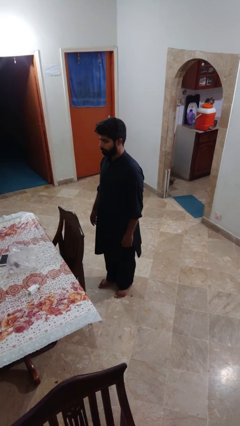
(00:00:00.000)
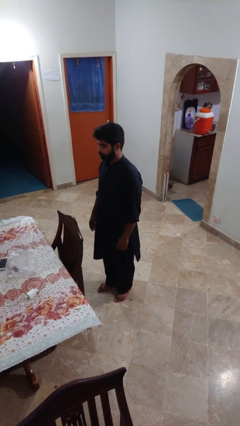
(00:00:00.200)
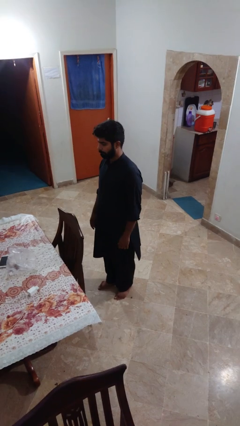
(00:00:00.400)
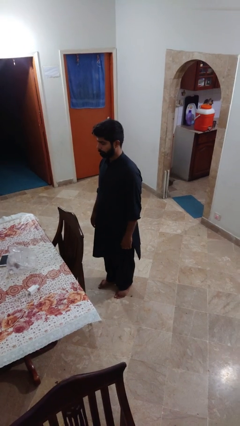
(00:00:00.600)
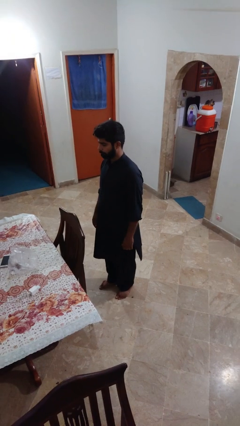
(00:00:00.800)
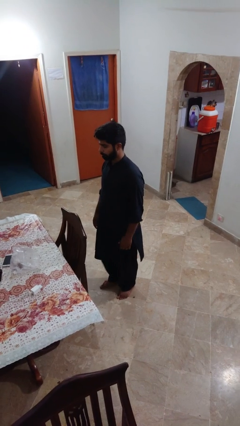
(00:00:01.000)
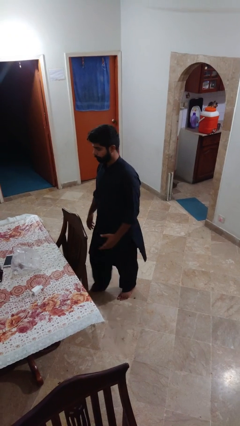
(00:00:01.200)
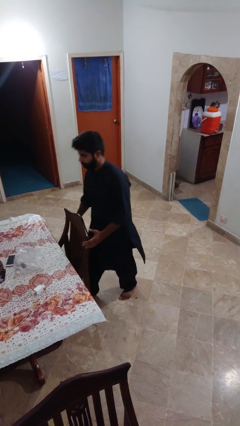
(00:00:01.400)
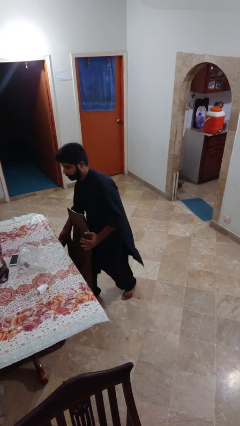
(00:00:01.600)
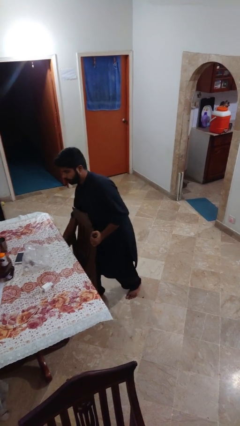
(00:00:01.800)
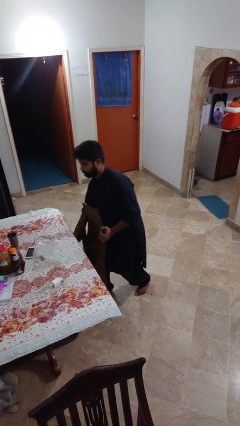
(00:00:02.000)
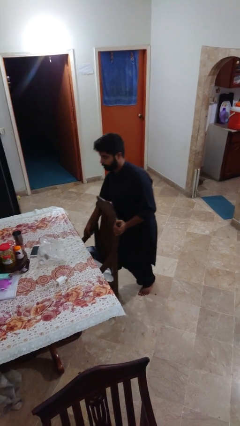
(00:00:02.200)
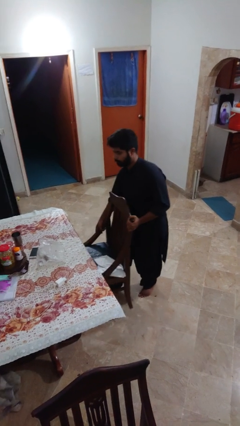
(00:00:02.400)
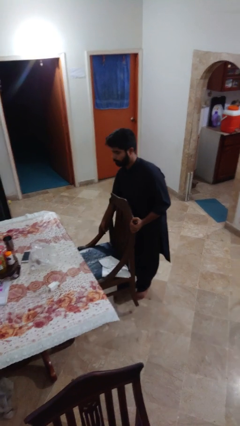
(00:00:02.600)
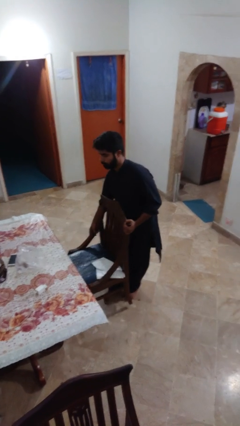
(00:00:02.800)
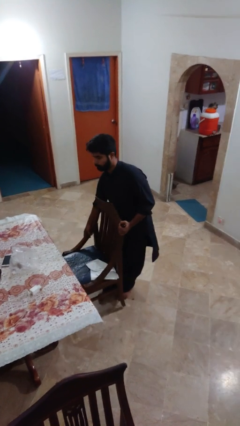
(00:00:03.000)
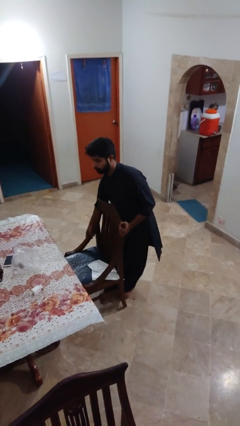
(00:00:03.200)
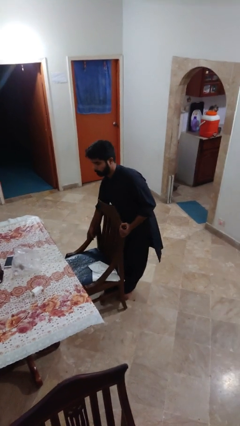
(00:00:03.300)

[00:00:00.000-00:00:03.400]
person pulls out chair

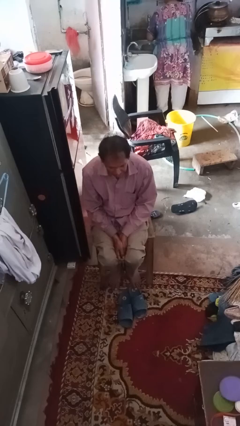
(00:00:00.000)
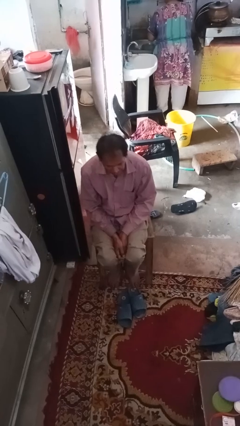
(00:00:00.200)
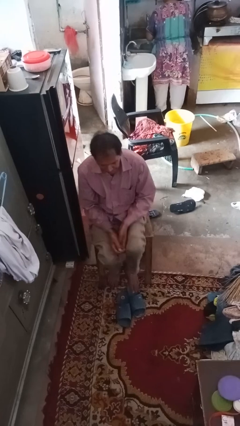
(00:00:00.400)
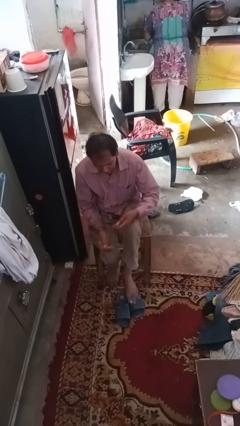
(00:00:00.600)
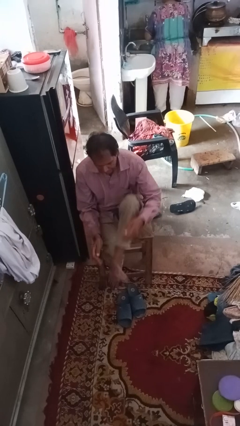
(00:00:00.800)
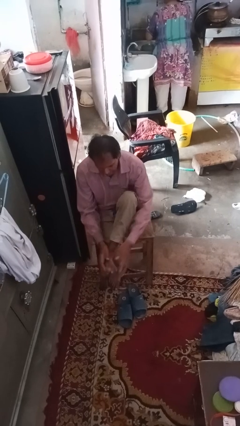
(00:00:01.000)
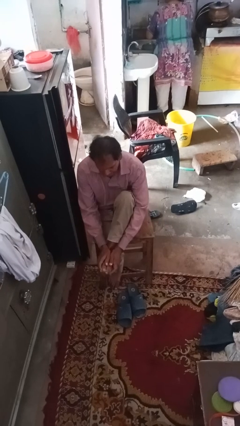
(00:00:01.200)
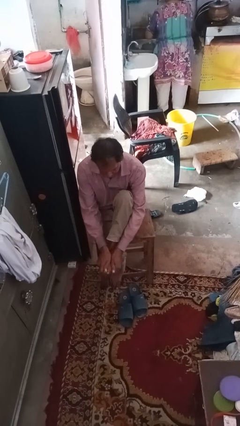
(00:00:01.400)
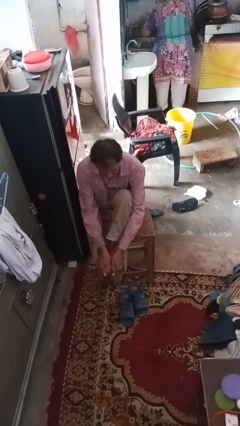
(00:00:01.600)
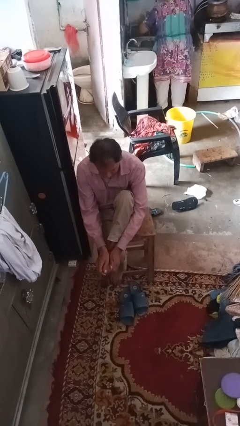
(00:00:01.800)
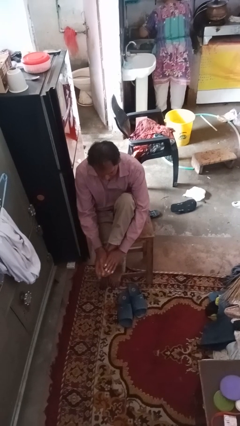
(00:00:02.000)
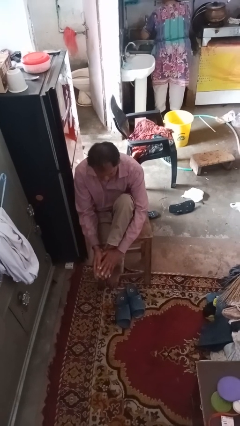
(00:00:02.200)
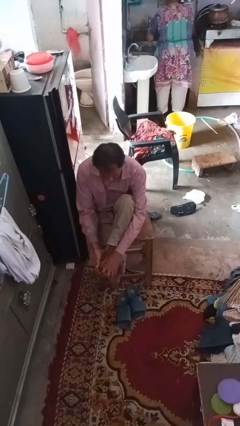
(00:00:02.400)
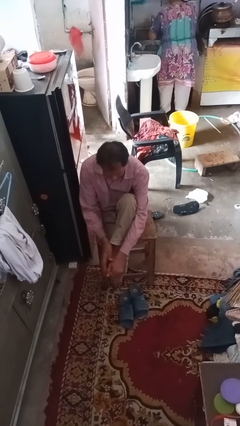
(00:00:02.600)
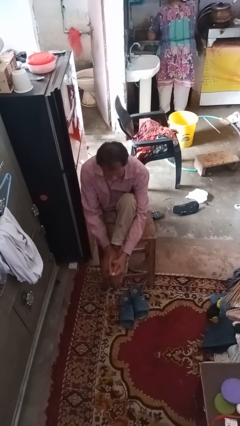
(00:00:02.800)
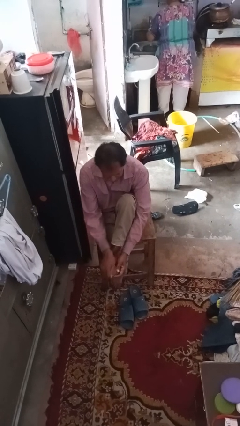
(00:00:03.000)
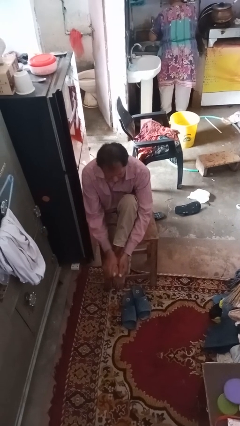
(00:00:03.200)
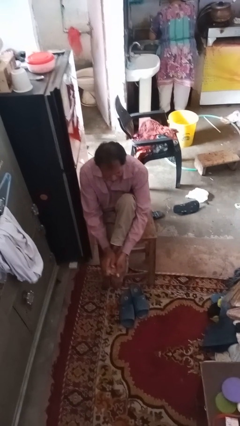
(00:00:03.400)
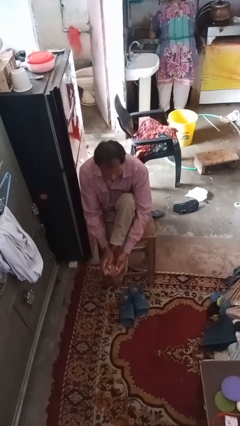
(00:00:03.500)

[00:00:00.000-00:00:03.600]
person rubs foot

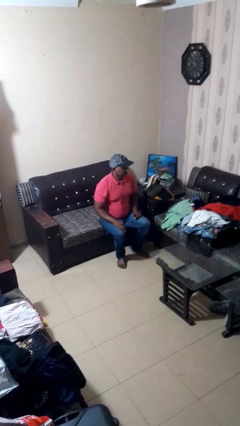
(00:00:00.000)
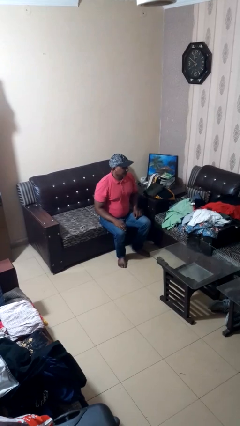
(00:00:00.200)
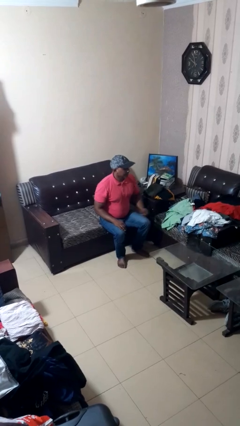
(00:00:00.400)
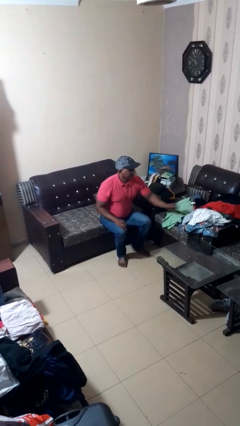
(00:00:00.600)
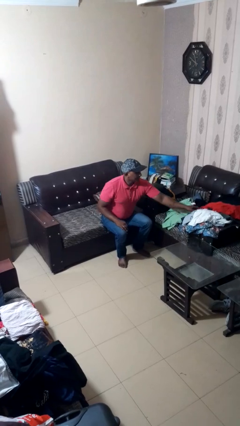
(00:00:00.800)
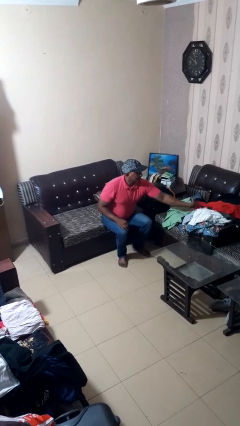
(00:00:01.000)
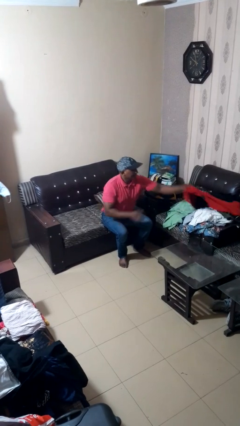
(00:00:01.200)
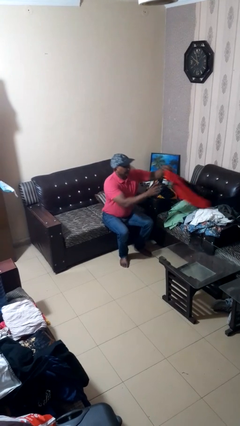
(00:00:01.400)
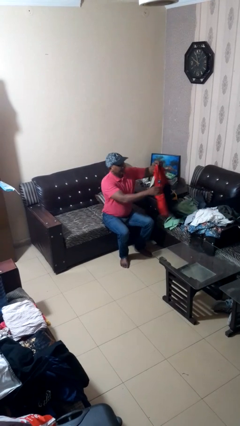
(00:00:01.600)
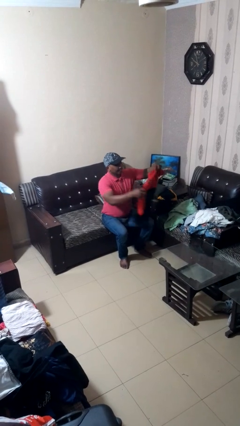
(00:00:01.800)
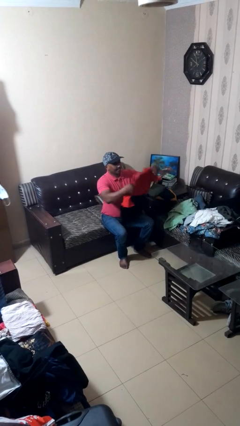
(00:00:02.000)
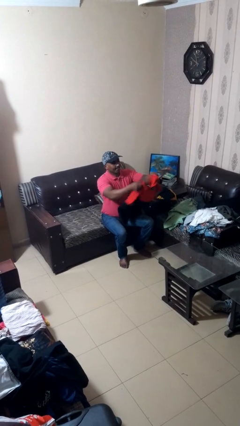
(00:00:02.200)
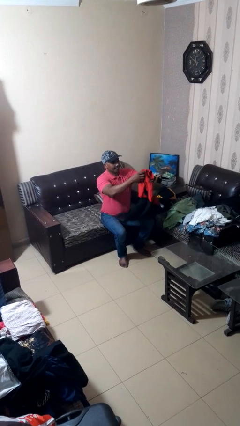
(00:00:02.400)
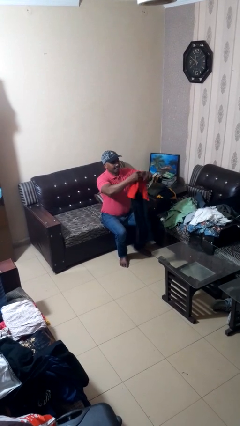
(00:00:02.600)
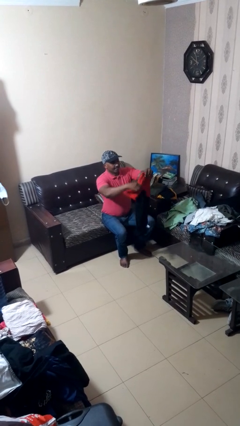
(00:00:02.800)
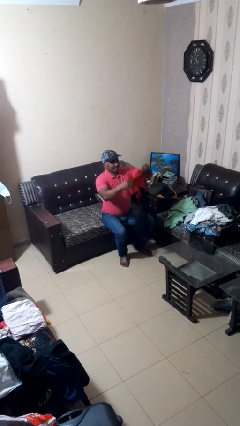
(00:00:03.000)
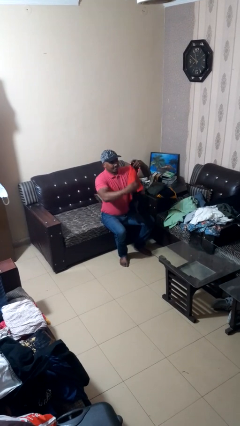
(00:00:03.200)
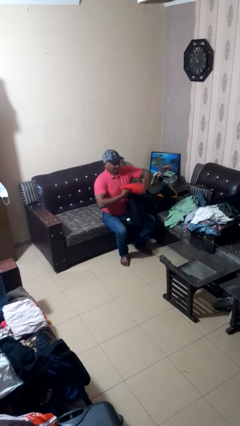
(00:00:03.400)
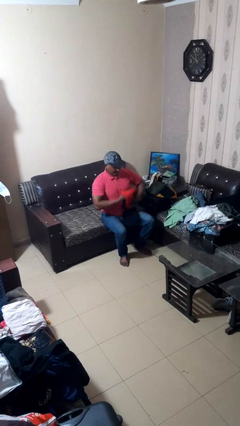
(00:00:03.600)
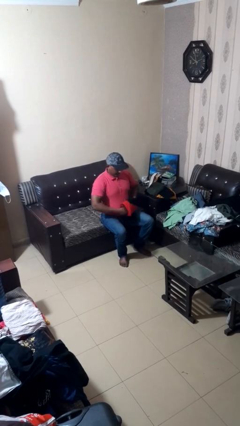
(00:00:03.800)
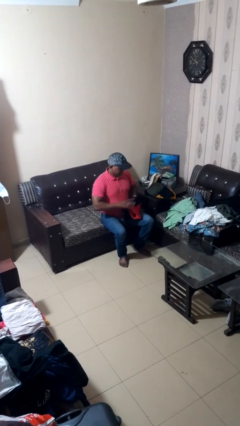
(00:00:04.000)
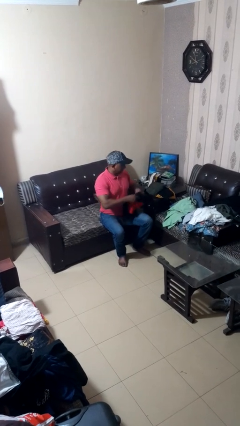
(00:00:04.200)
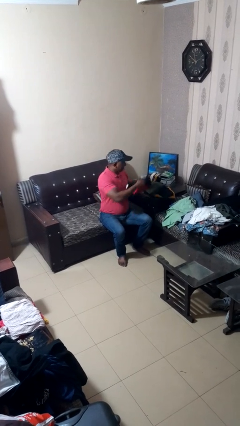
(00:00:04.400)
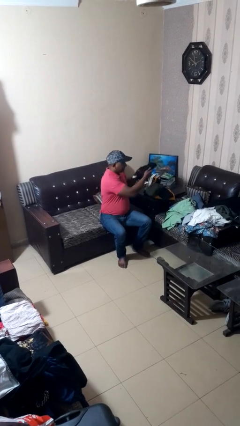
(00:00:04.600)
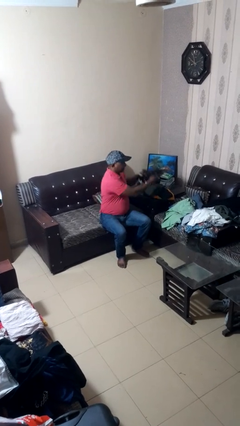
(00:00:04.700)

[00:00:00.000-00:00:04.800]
person folds shirt

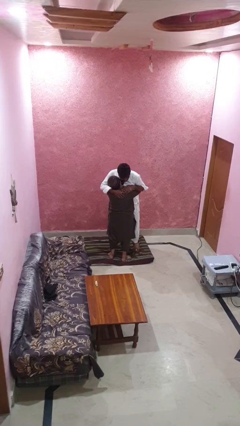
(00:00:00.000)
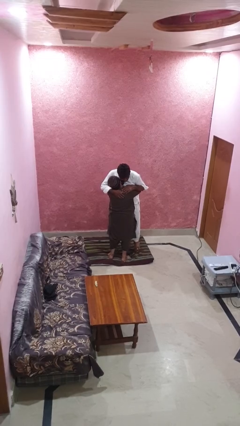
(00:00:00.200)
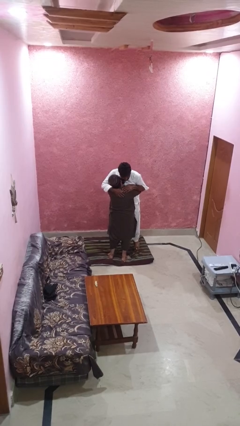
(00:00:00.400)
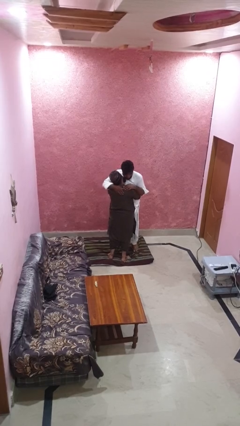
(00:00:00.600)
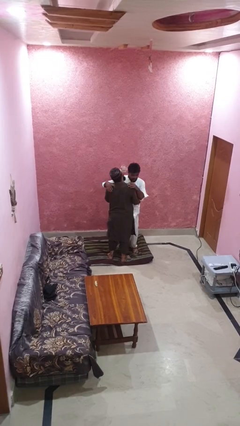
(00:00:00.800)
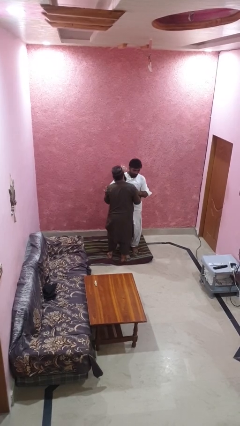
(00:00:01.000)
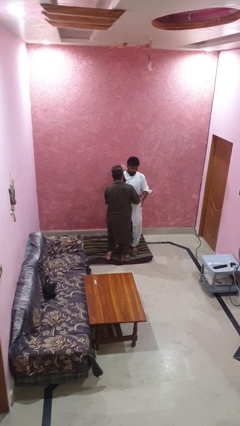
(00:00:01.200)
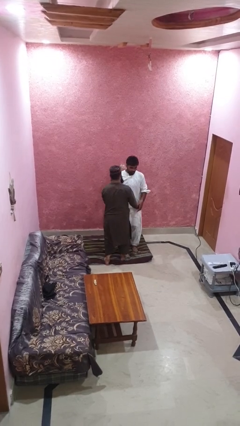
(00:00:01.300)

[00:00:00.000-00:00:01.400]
person puts down person

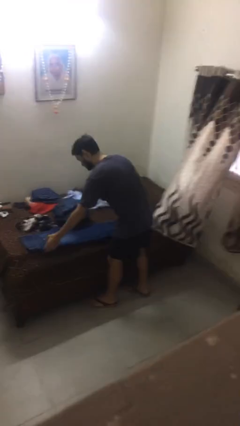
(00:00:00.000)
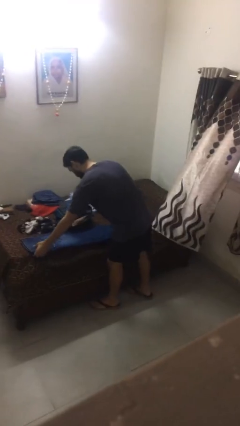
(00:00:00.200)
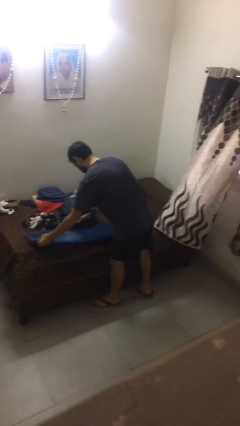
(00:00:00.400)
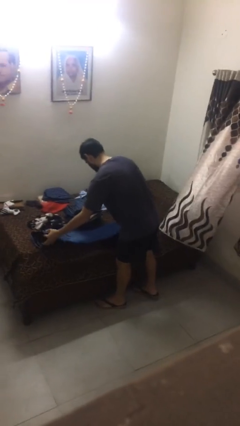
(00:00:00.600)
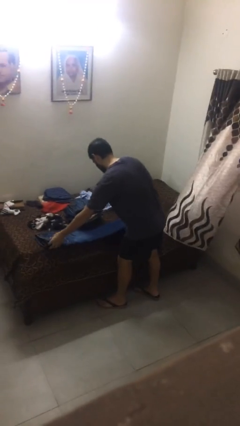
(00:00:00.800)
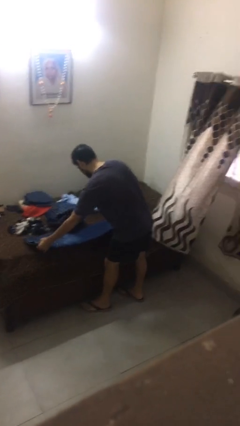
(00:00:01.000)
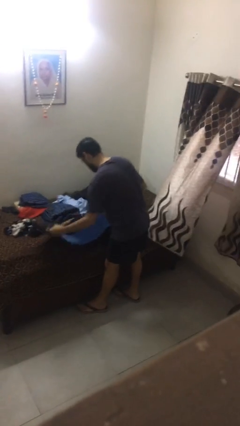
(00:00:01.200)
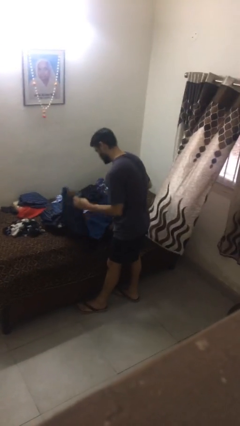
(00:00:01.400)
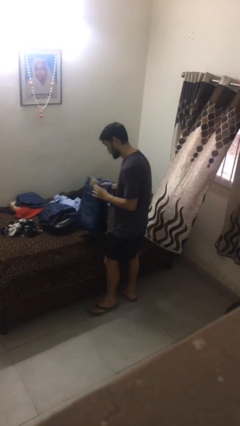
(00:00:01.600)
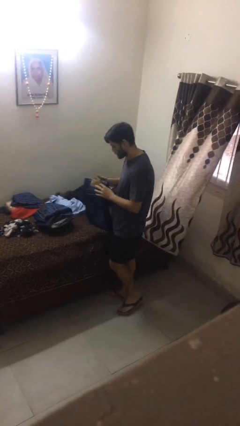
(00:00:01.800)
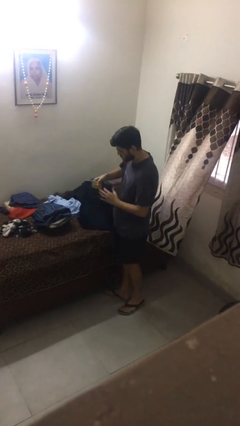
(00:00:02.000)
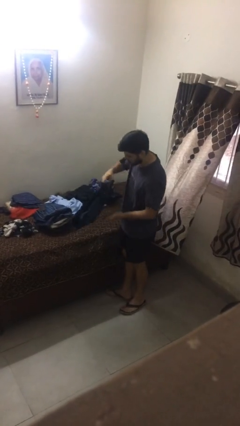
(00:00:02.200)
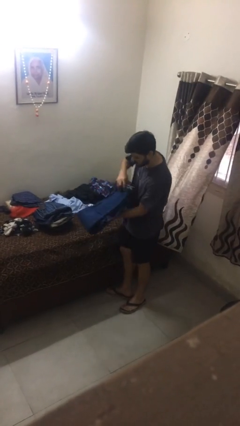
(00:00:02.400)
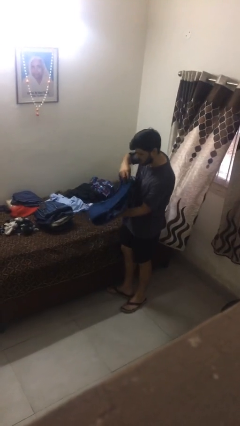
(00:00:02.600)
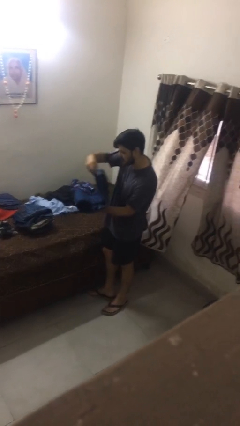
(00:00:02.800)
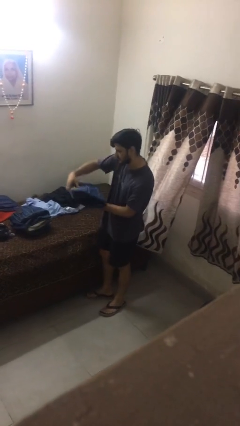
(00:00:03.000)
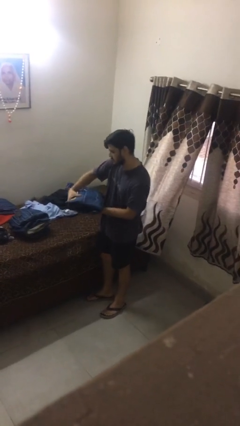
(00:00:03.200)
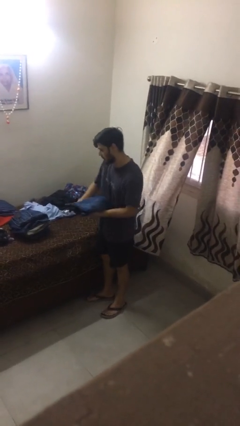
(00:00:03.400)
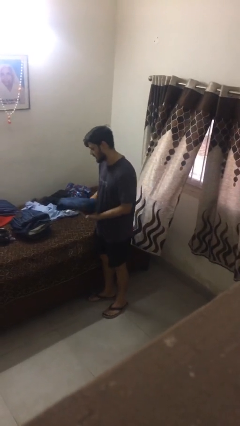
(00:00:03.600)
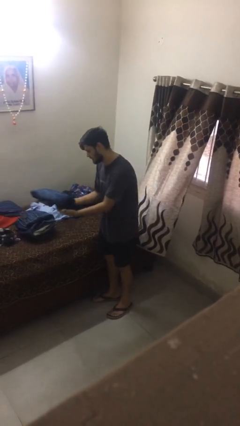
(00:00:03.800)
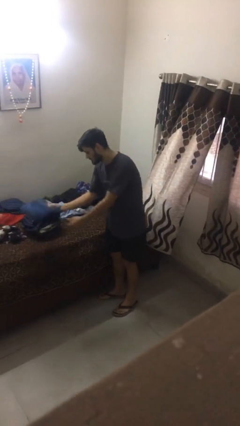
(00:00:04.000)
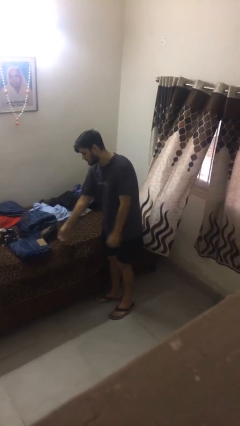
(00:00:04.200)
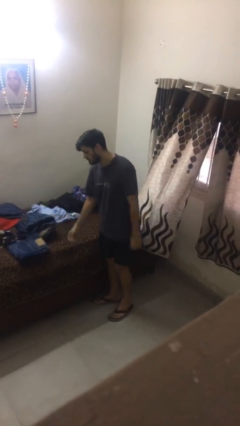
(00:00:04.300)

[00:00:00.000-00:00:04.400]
person folds pants
